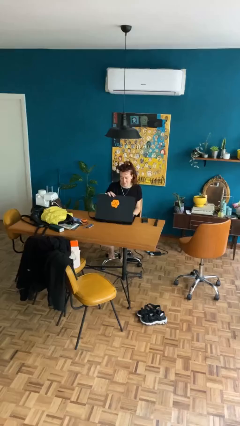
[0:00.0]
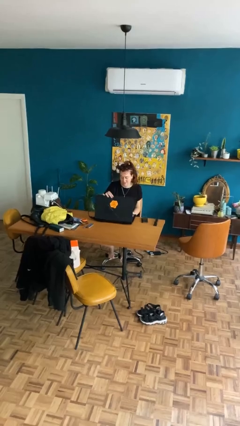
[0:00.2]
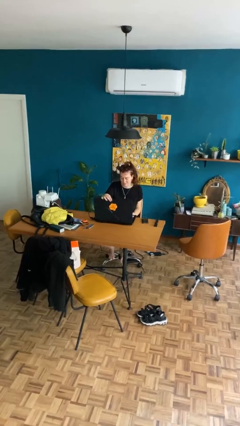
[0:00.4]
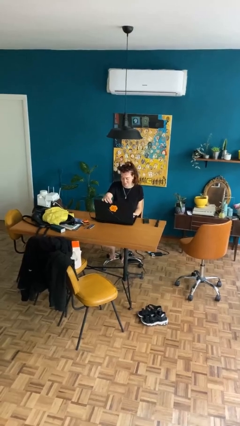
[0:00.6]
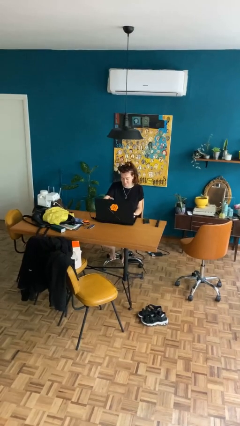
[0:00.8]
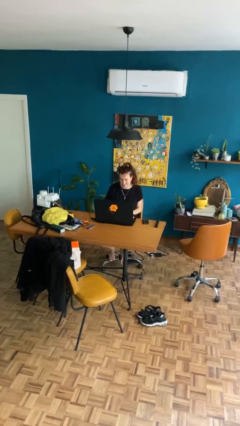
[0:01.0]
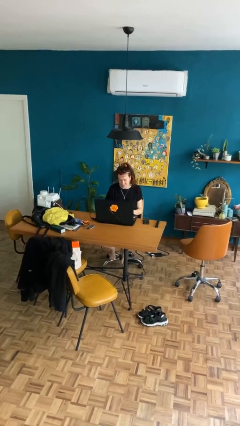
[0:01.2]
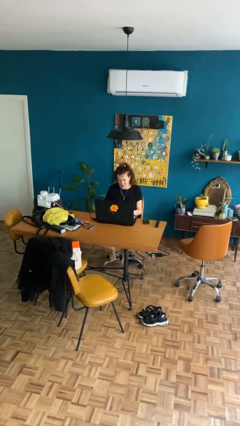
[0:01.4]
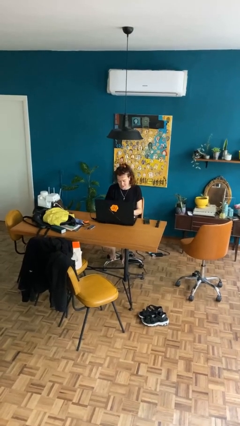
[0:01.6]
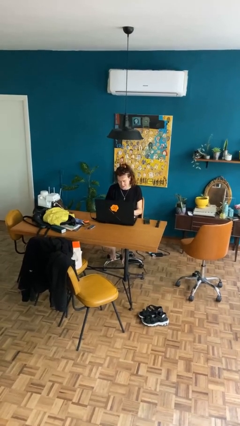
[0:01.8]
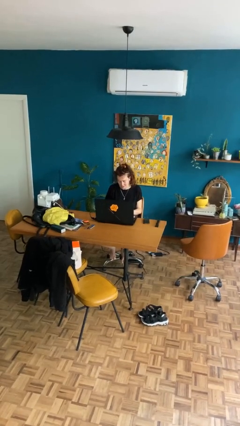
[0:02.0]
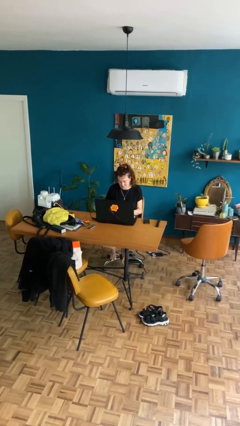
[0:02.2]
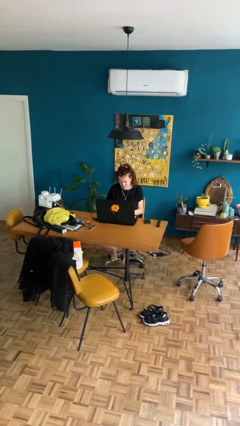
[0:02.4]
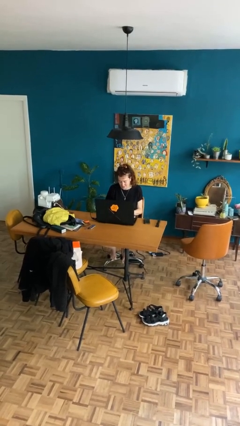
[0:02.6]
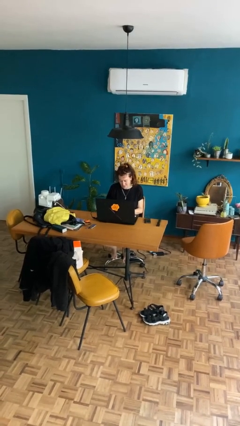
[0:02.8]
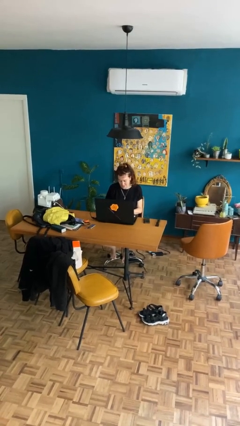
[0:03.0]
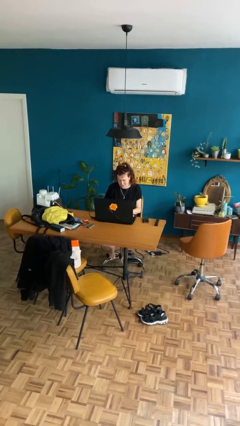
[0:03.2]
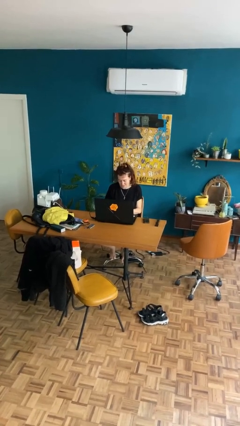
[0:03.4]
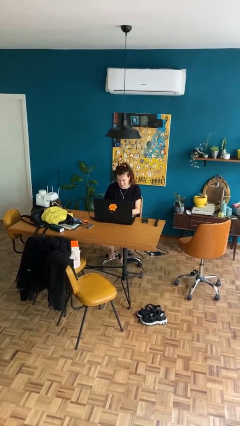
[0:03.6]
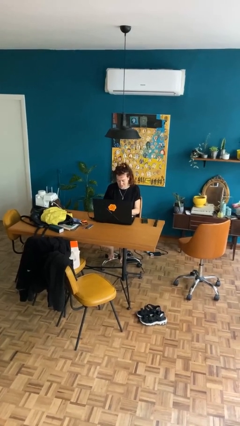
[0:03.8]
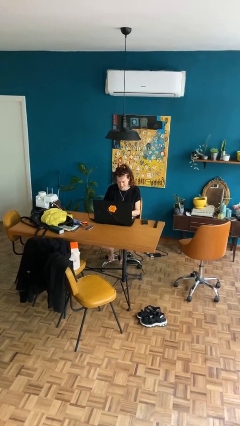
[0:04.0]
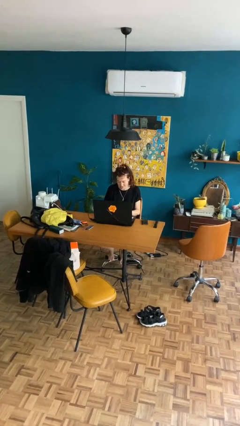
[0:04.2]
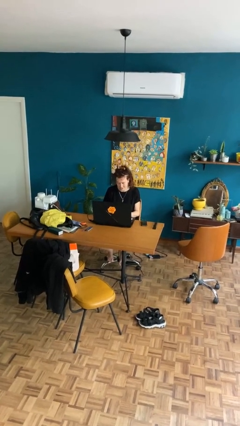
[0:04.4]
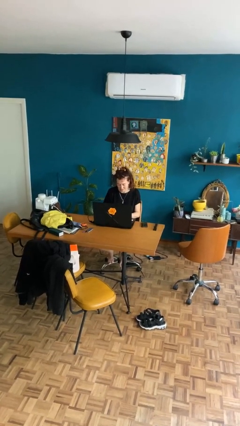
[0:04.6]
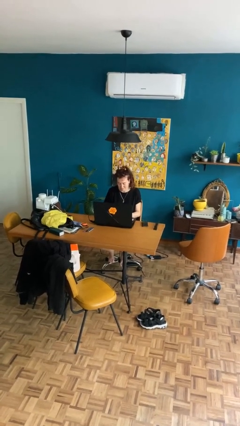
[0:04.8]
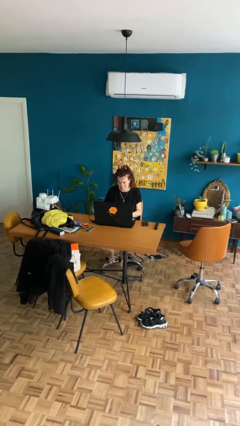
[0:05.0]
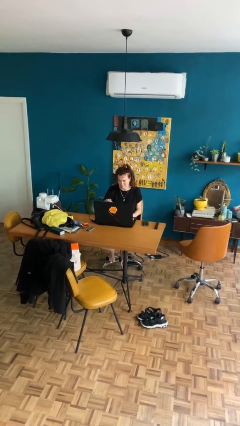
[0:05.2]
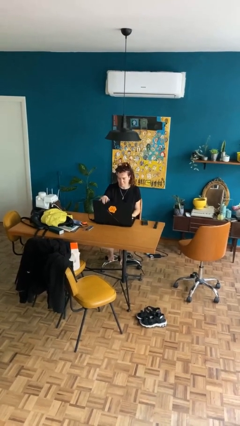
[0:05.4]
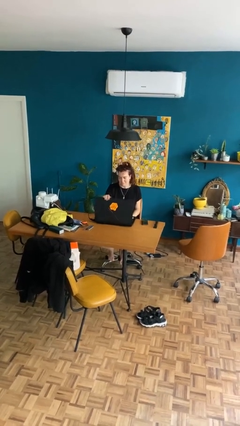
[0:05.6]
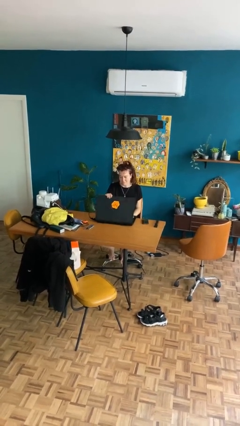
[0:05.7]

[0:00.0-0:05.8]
person interacts with laptop

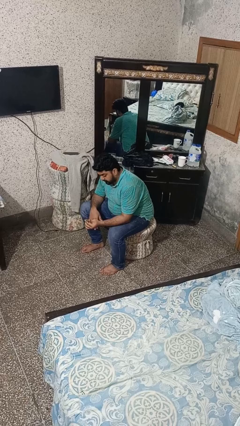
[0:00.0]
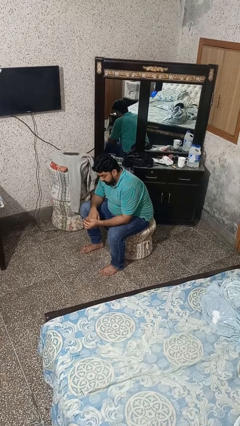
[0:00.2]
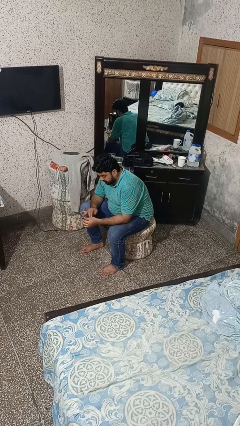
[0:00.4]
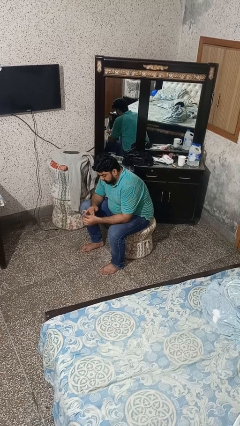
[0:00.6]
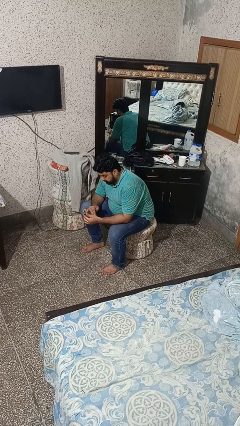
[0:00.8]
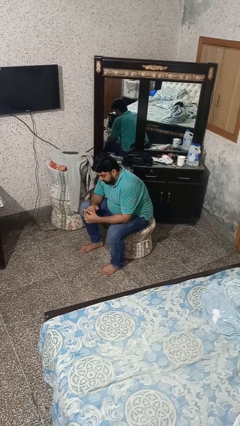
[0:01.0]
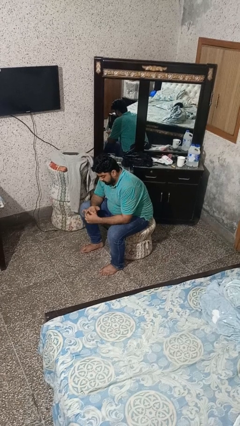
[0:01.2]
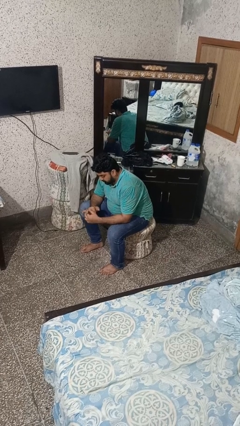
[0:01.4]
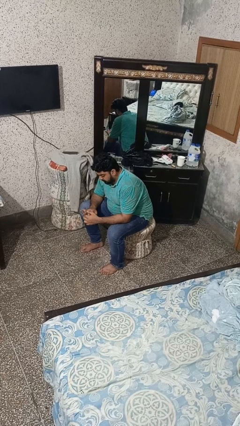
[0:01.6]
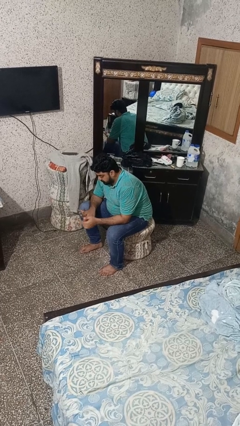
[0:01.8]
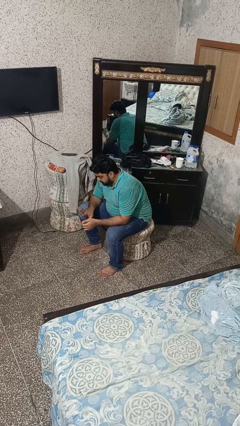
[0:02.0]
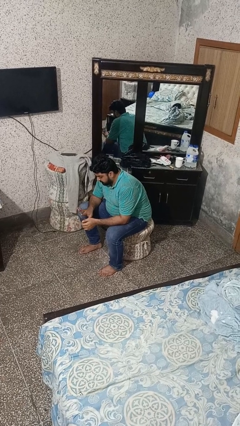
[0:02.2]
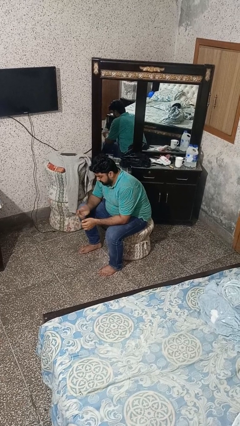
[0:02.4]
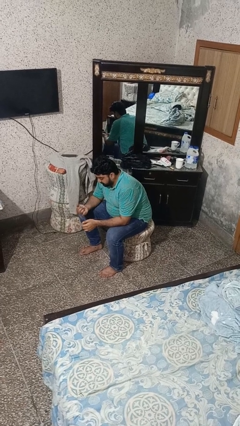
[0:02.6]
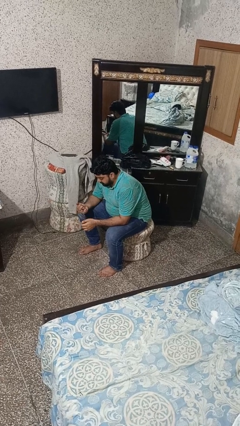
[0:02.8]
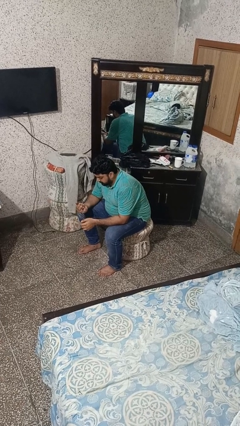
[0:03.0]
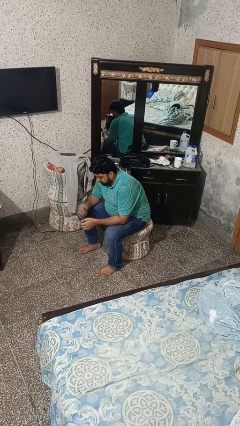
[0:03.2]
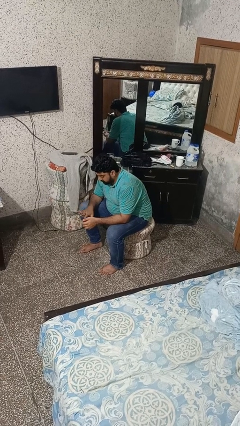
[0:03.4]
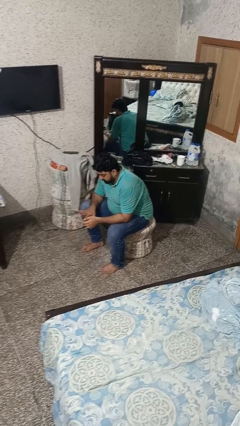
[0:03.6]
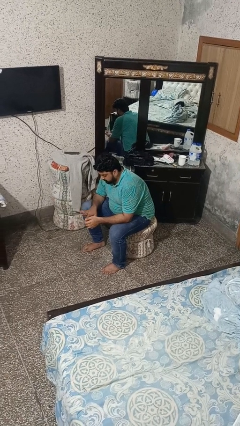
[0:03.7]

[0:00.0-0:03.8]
person puts on ring

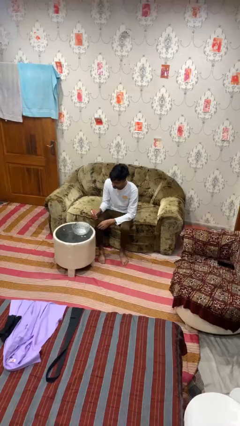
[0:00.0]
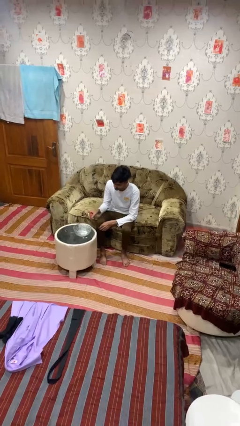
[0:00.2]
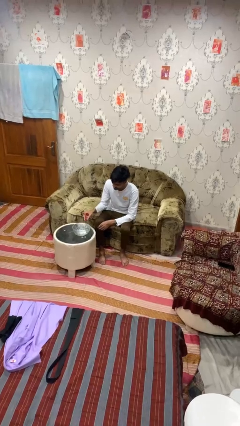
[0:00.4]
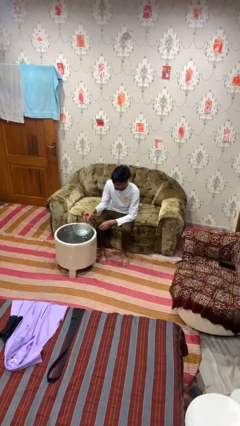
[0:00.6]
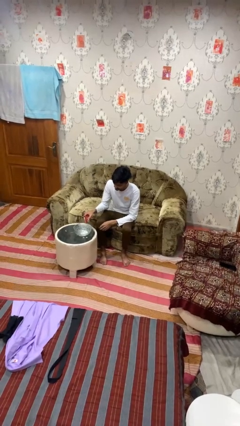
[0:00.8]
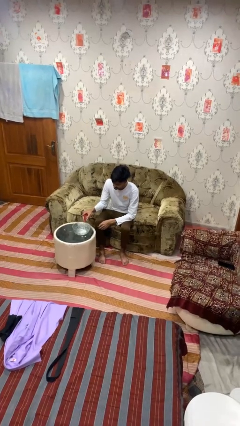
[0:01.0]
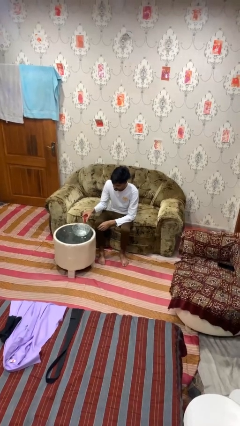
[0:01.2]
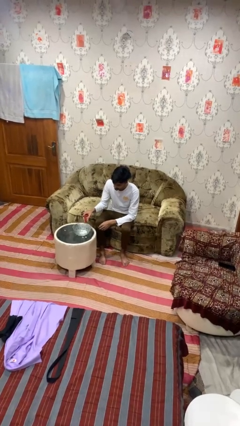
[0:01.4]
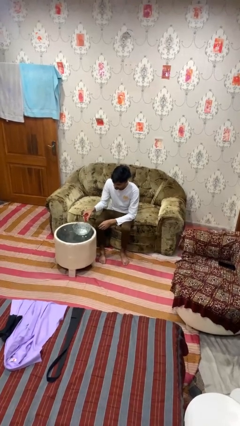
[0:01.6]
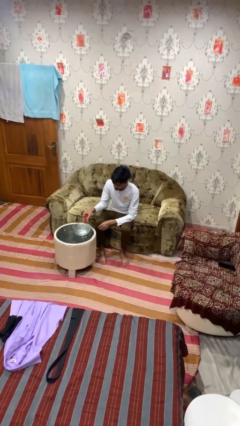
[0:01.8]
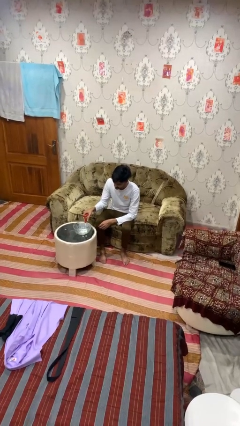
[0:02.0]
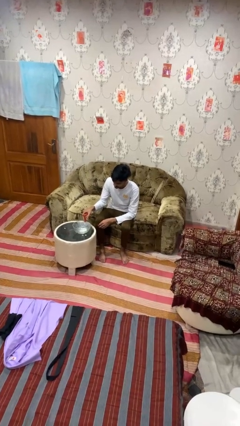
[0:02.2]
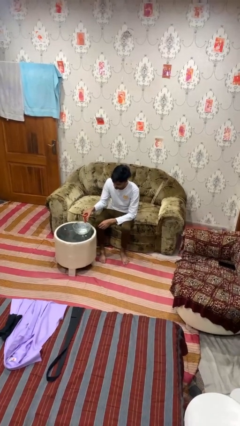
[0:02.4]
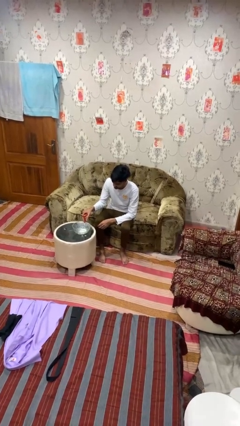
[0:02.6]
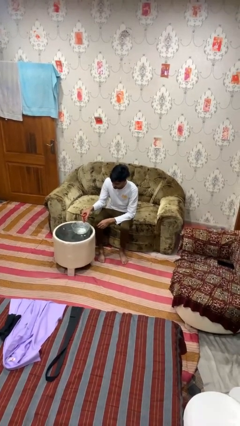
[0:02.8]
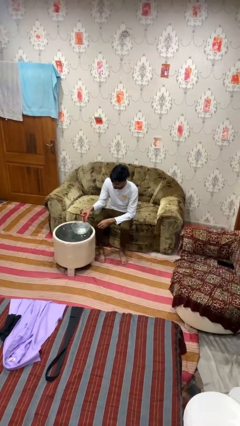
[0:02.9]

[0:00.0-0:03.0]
person pours into bowl

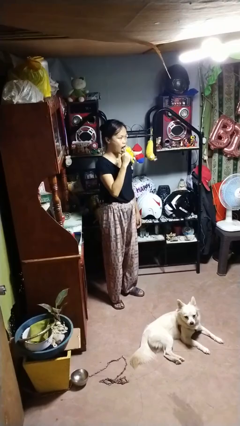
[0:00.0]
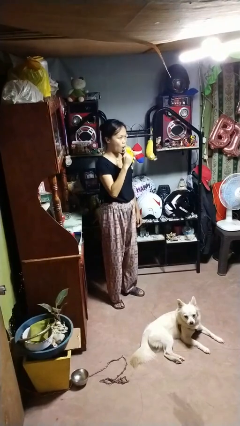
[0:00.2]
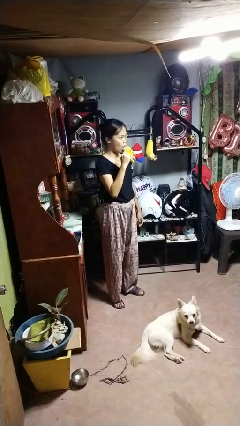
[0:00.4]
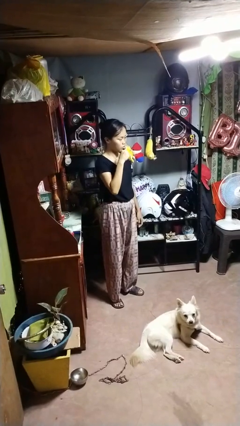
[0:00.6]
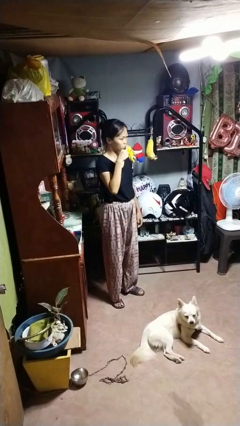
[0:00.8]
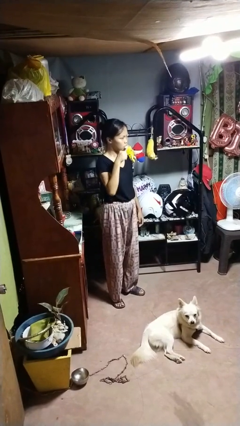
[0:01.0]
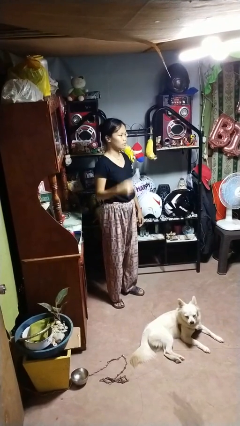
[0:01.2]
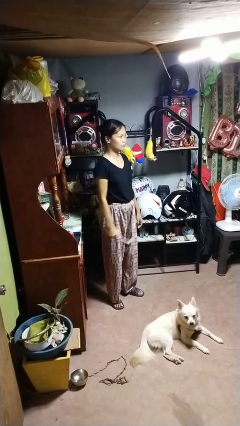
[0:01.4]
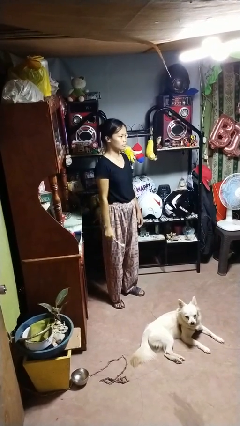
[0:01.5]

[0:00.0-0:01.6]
person brushes teeth

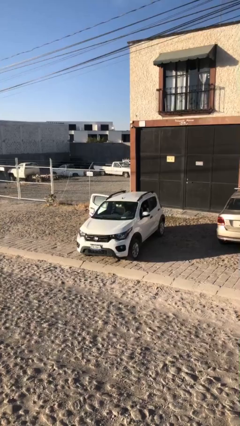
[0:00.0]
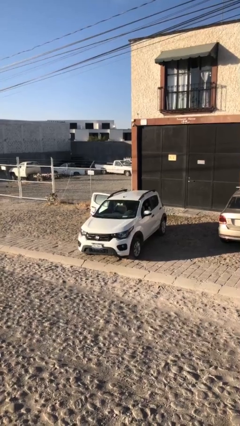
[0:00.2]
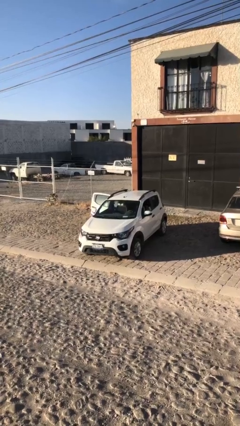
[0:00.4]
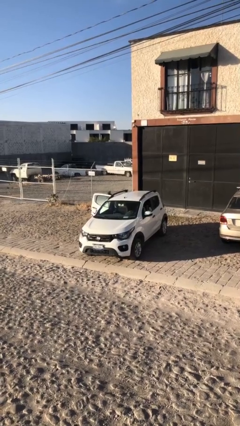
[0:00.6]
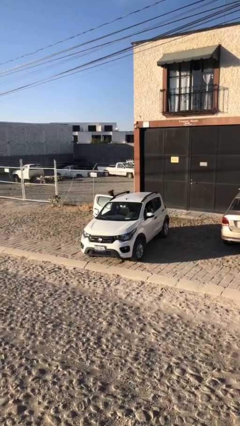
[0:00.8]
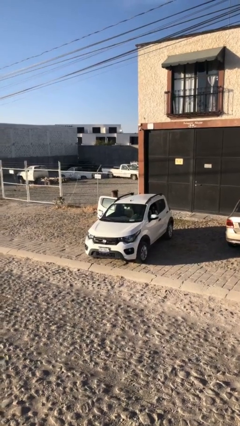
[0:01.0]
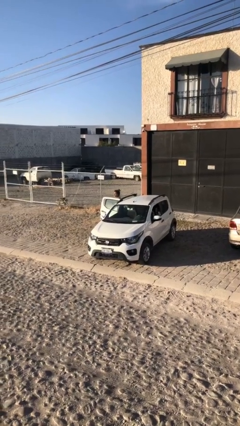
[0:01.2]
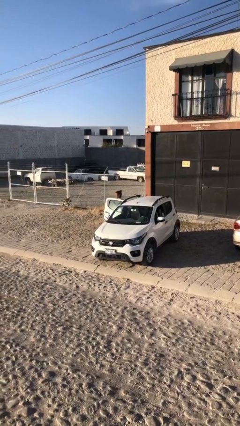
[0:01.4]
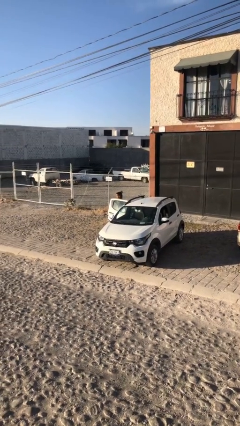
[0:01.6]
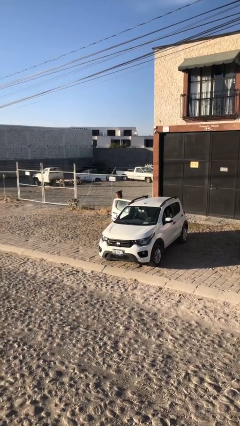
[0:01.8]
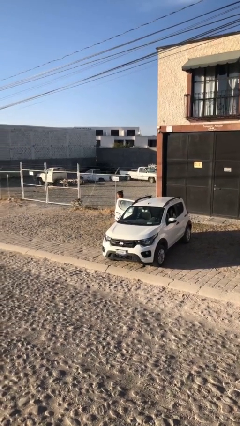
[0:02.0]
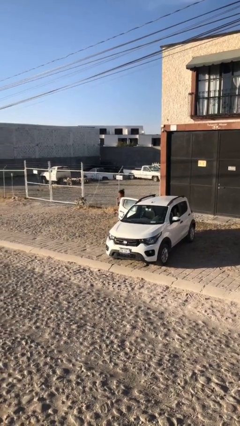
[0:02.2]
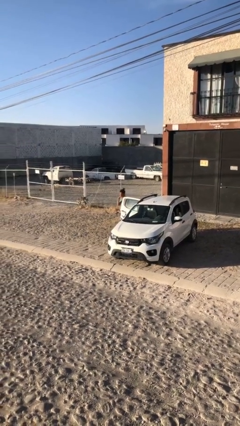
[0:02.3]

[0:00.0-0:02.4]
person exits car

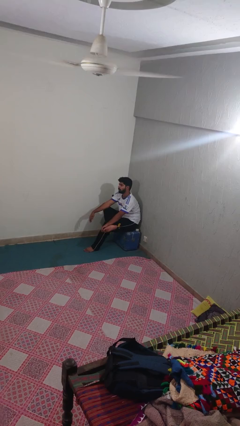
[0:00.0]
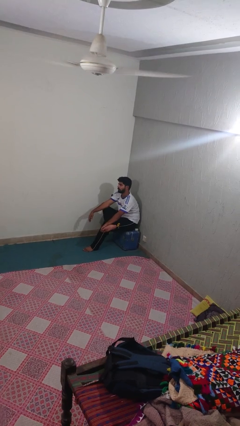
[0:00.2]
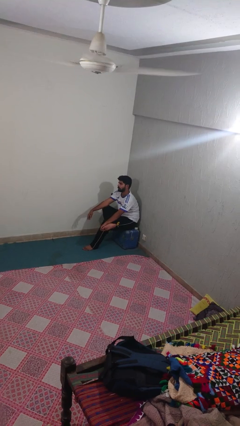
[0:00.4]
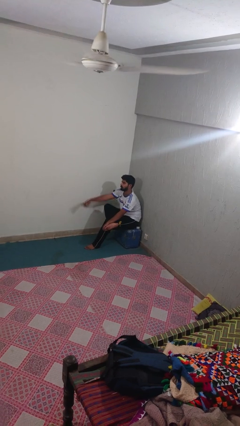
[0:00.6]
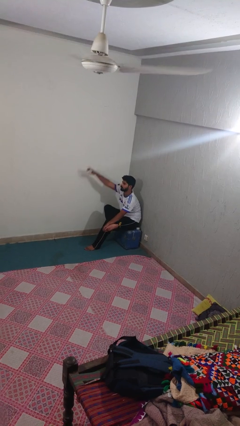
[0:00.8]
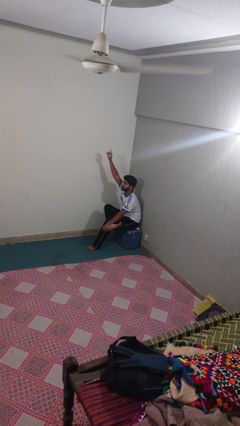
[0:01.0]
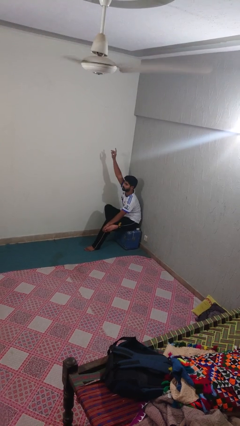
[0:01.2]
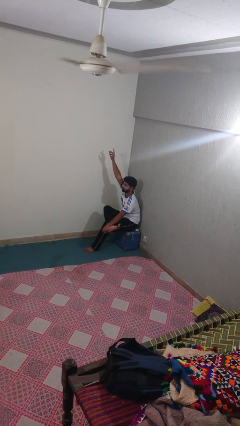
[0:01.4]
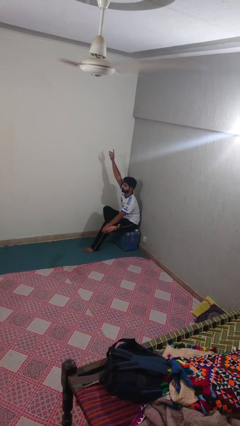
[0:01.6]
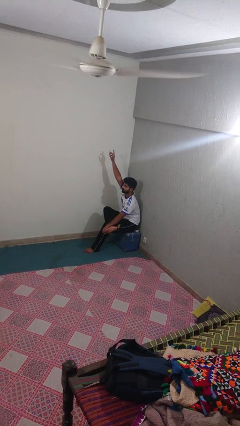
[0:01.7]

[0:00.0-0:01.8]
person gestures raise hand
